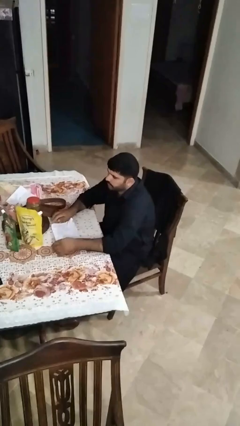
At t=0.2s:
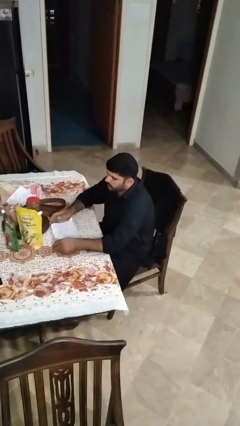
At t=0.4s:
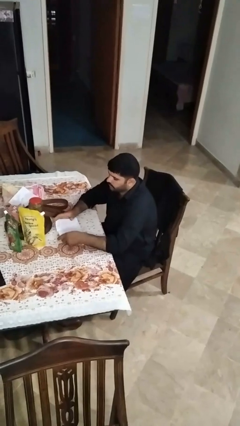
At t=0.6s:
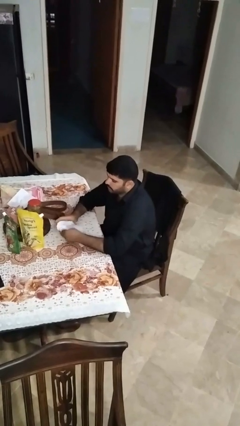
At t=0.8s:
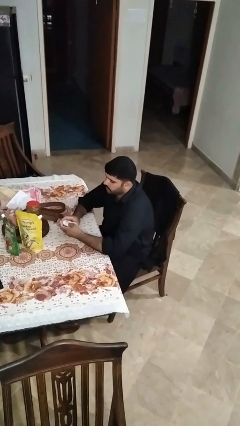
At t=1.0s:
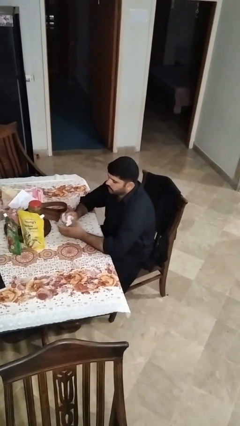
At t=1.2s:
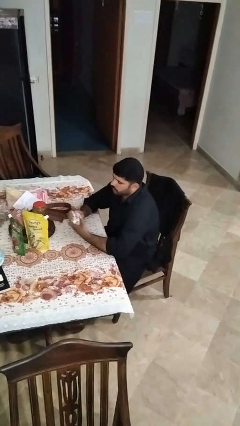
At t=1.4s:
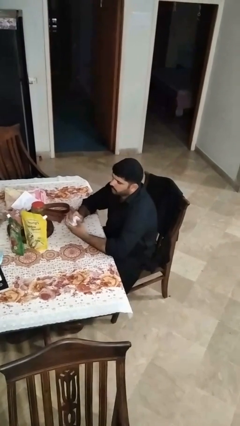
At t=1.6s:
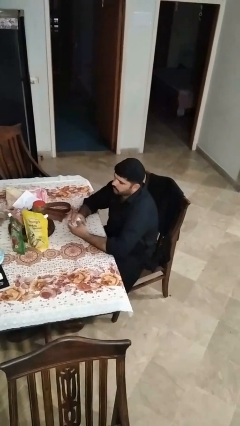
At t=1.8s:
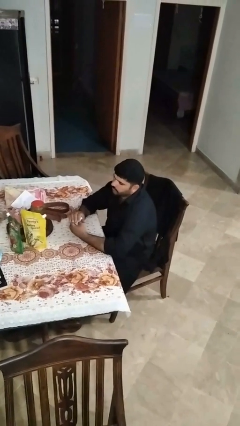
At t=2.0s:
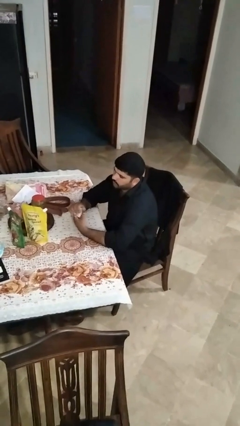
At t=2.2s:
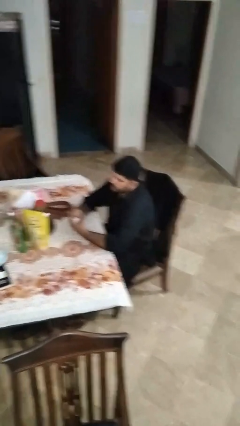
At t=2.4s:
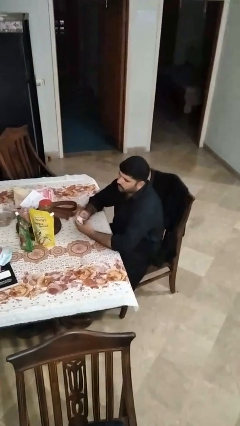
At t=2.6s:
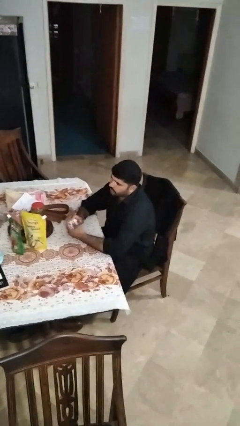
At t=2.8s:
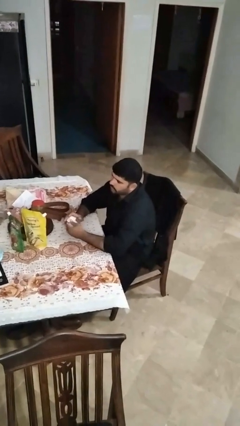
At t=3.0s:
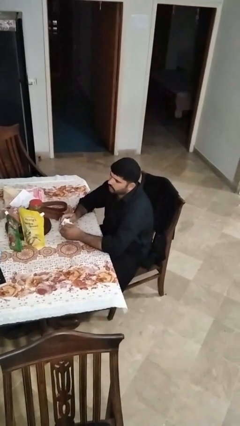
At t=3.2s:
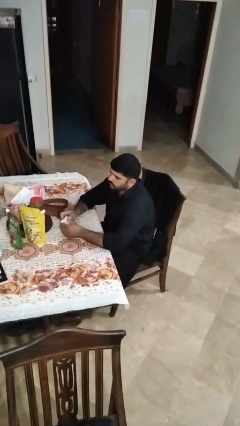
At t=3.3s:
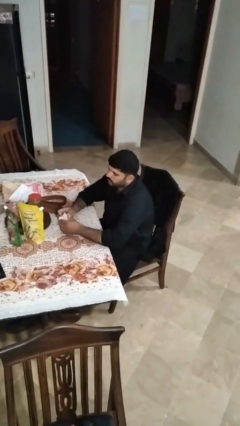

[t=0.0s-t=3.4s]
person crumples paper

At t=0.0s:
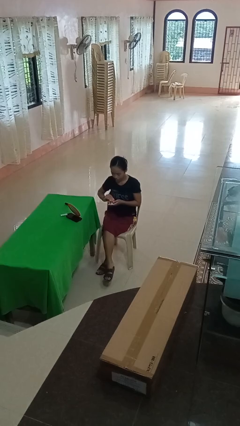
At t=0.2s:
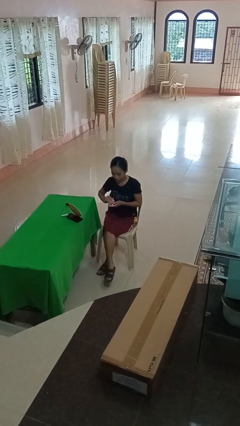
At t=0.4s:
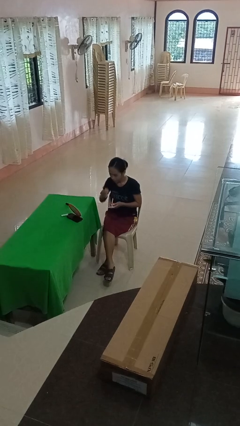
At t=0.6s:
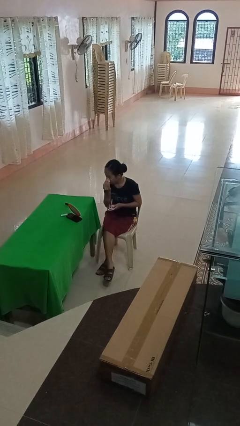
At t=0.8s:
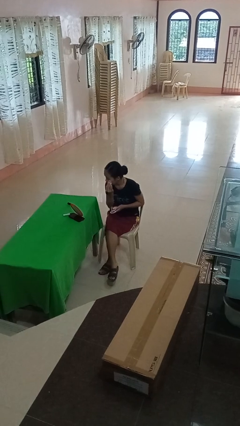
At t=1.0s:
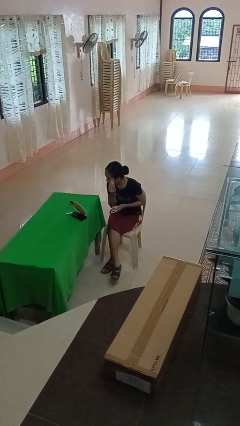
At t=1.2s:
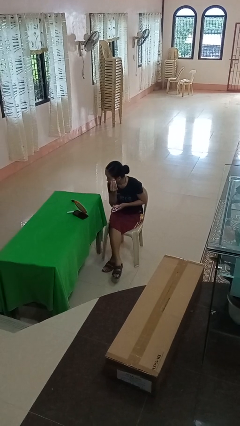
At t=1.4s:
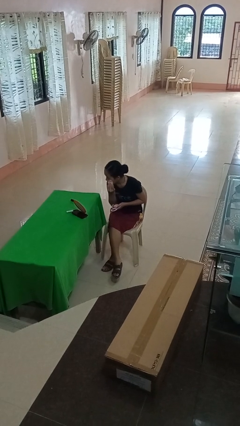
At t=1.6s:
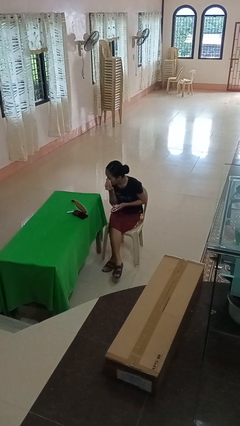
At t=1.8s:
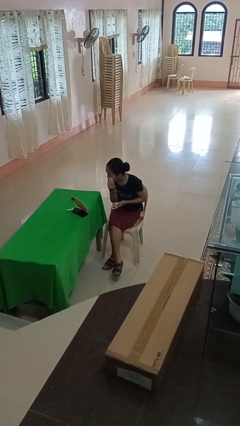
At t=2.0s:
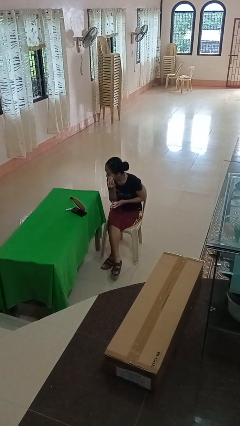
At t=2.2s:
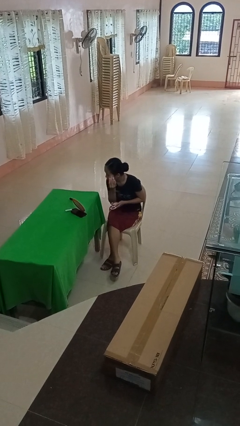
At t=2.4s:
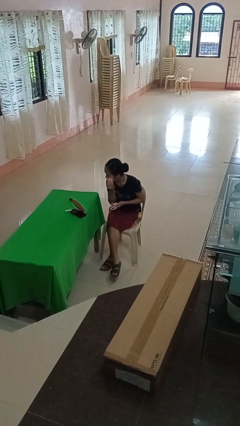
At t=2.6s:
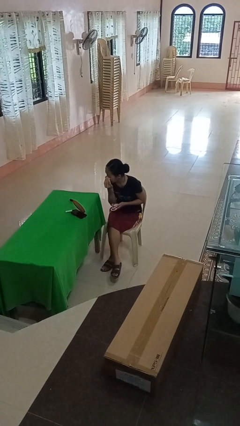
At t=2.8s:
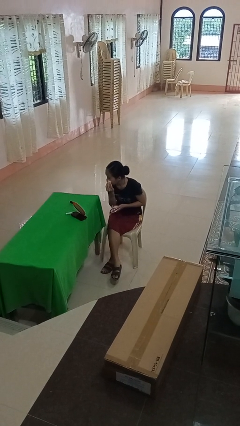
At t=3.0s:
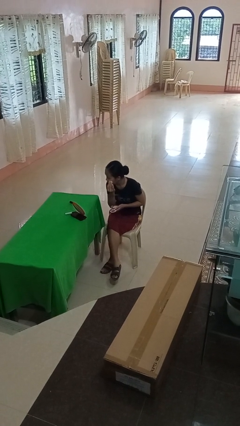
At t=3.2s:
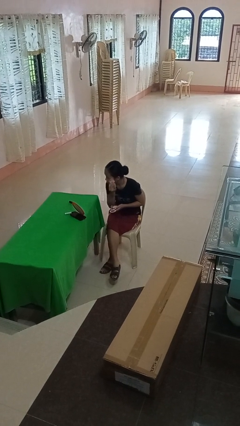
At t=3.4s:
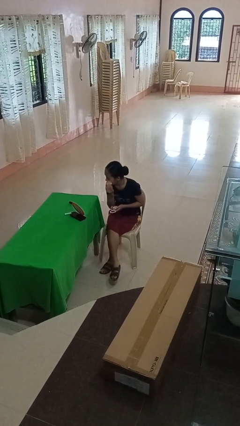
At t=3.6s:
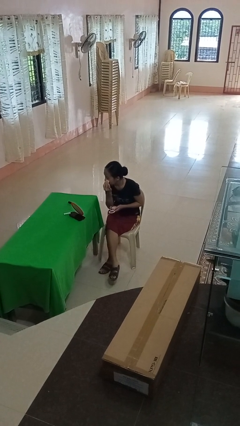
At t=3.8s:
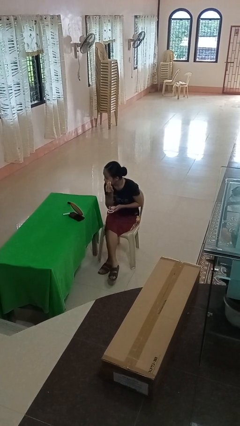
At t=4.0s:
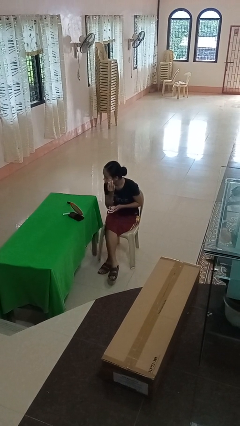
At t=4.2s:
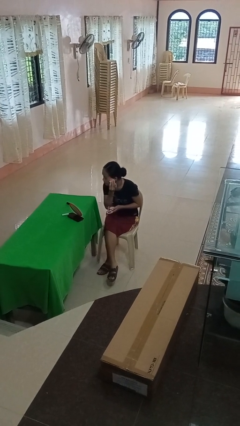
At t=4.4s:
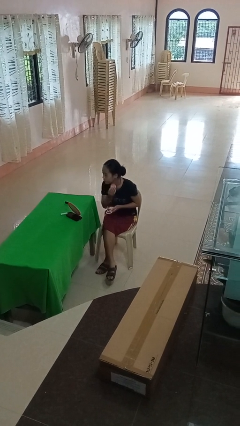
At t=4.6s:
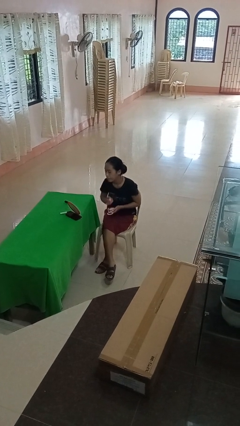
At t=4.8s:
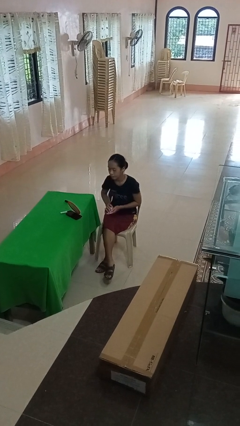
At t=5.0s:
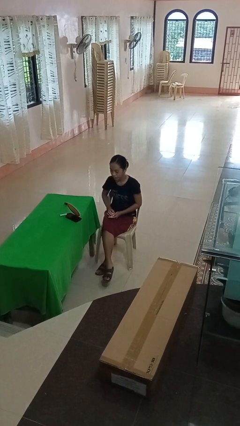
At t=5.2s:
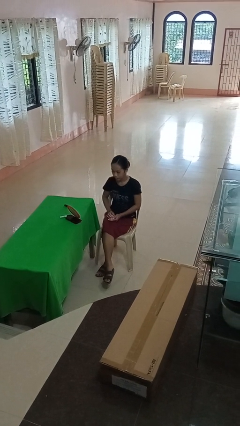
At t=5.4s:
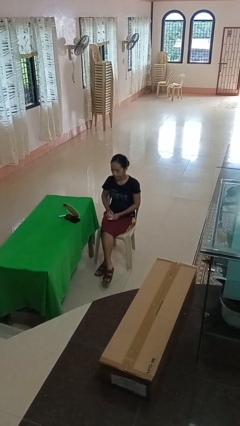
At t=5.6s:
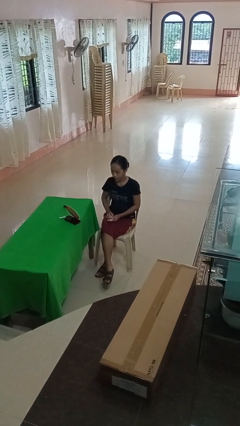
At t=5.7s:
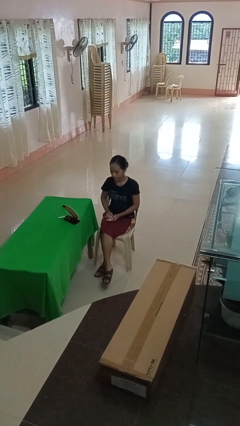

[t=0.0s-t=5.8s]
person applies foundation makeup

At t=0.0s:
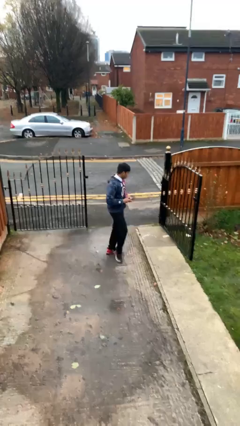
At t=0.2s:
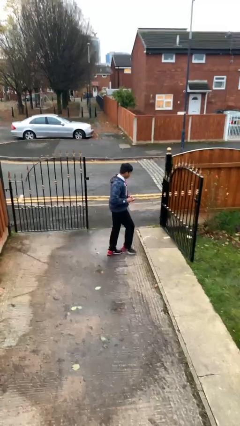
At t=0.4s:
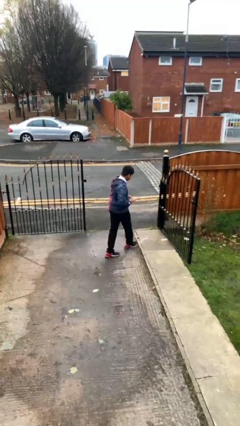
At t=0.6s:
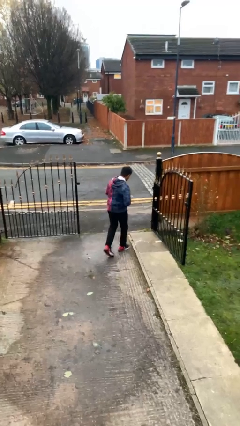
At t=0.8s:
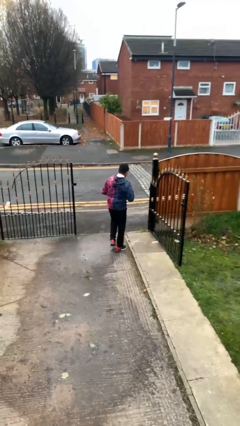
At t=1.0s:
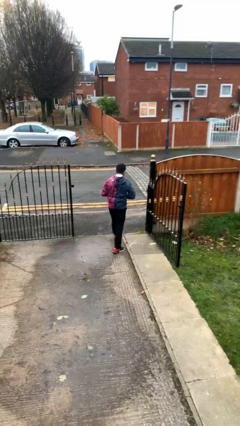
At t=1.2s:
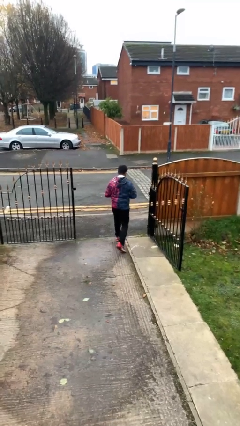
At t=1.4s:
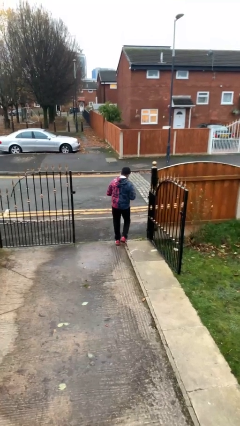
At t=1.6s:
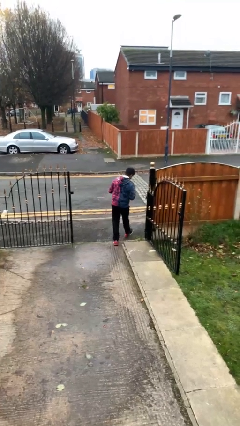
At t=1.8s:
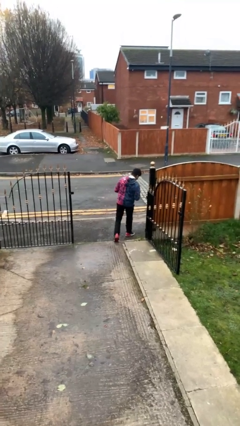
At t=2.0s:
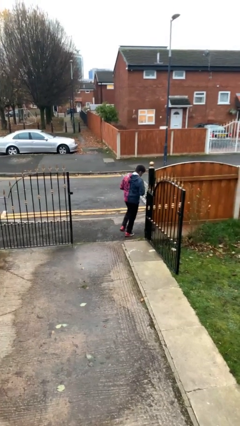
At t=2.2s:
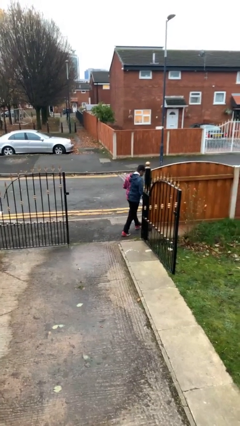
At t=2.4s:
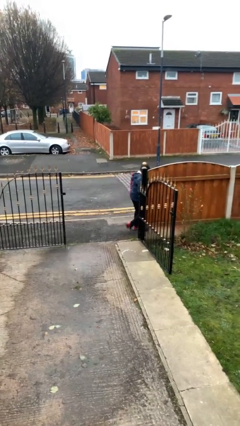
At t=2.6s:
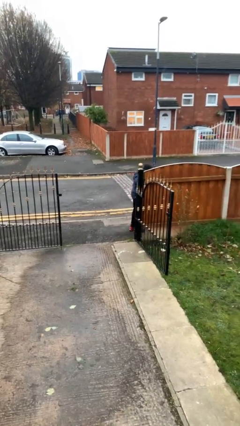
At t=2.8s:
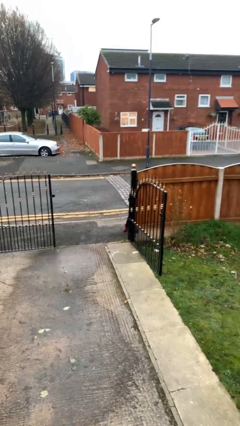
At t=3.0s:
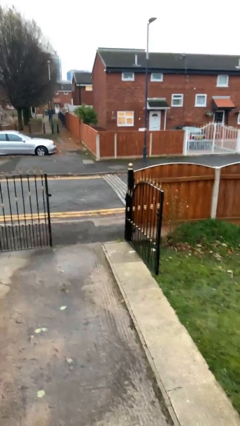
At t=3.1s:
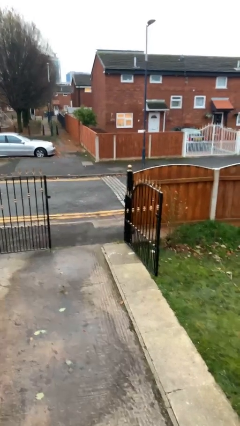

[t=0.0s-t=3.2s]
person exits scene through structure

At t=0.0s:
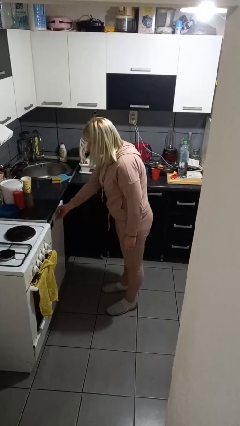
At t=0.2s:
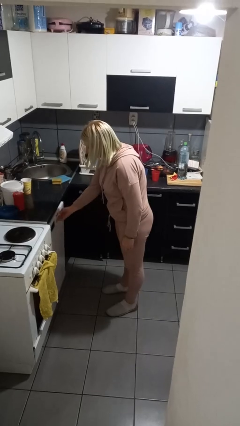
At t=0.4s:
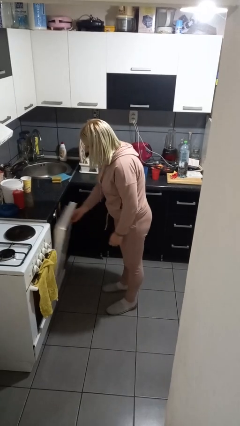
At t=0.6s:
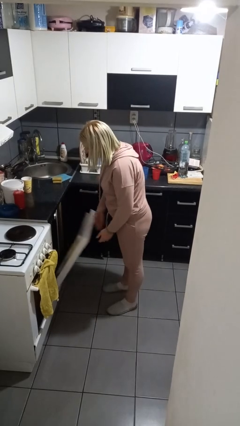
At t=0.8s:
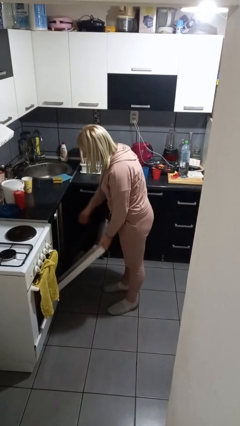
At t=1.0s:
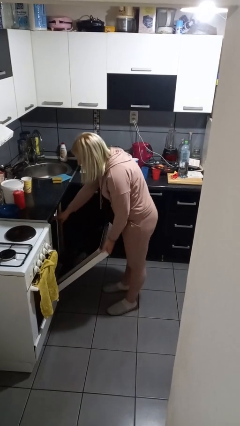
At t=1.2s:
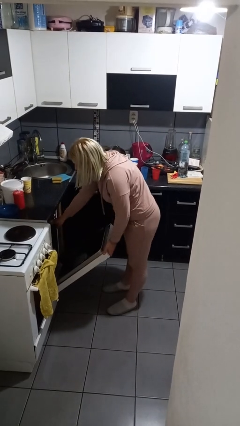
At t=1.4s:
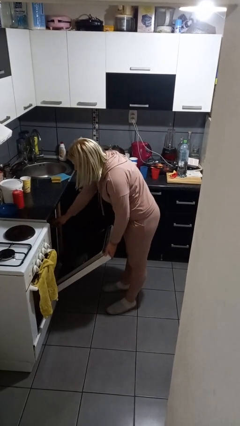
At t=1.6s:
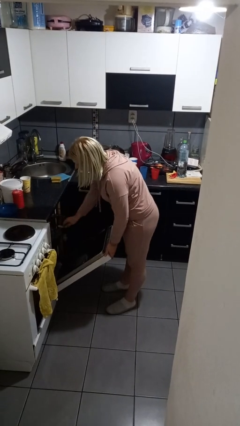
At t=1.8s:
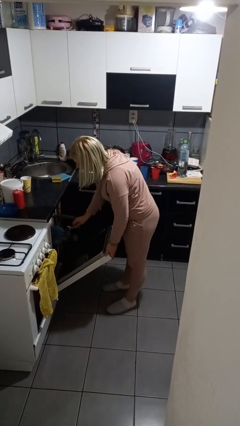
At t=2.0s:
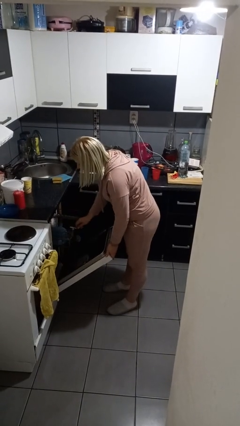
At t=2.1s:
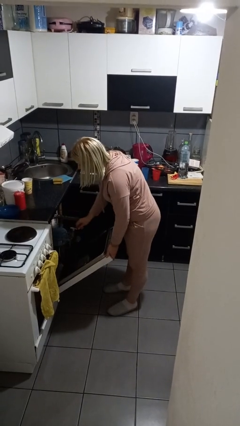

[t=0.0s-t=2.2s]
person opens dishwasher

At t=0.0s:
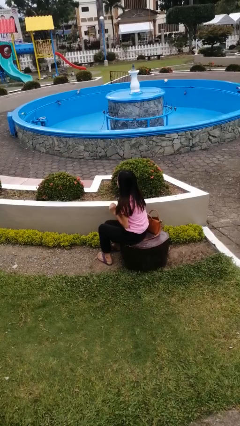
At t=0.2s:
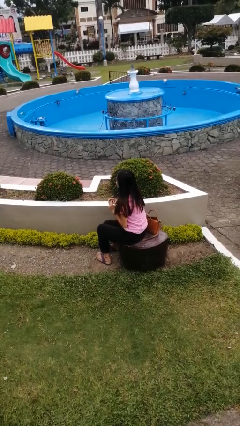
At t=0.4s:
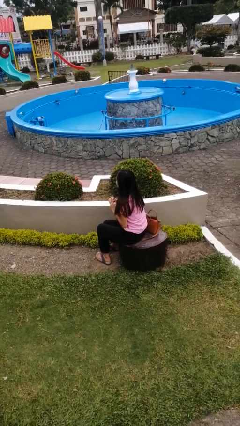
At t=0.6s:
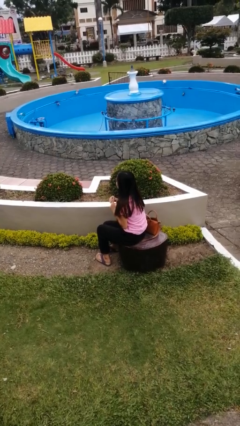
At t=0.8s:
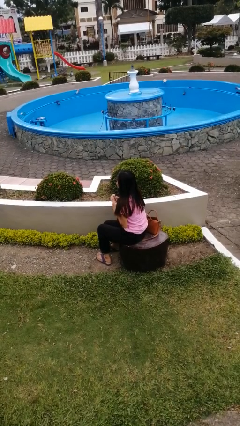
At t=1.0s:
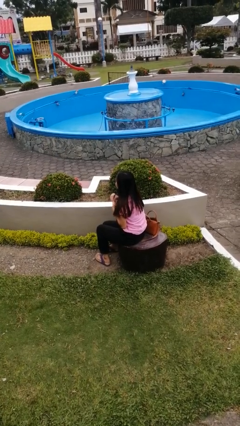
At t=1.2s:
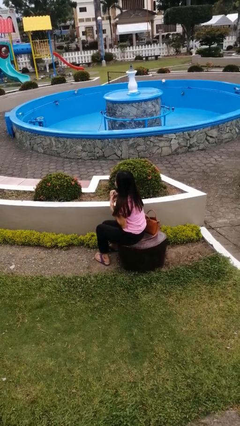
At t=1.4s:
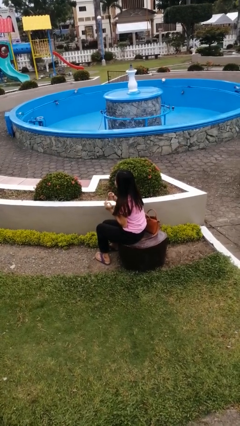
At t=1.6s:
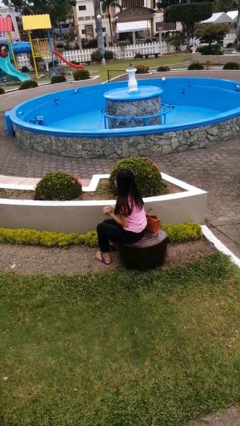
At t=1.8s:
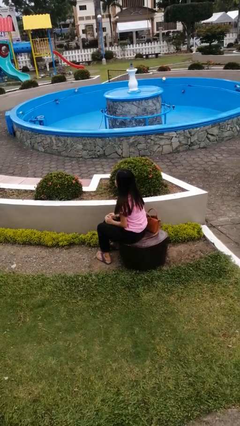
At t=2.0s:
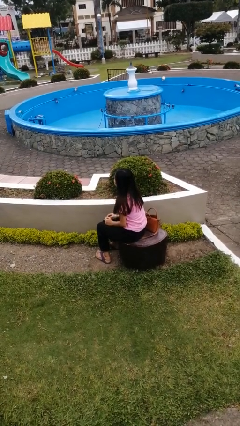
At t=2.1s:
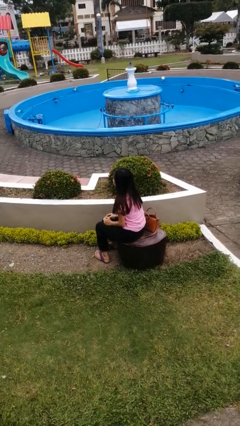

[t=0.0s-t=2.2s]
person takes off ring

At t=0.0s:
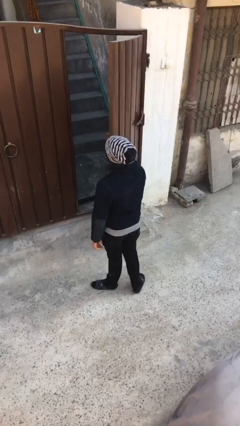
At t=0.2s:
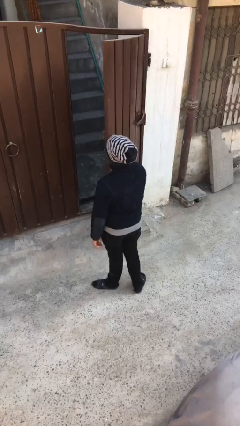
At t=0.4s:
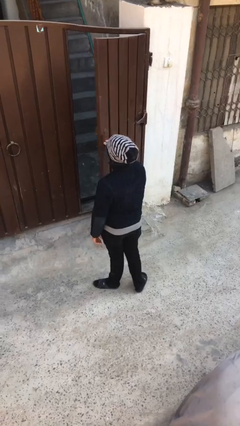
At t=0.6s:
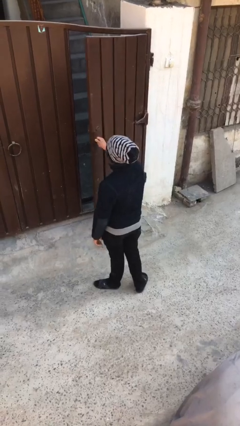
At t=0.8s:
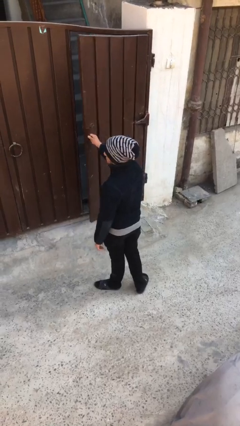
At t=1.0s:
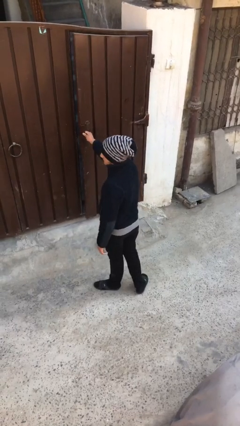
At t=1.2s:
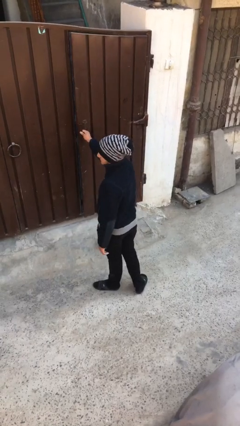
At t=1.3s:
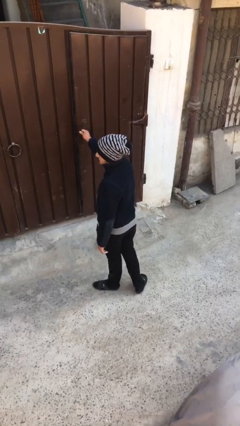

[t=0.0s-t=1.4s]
person closes facility door
